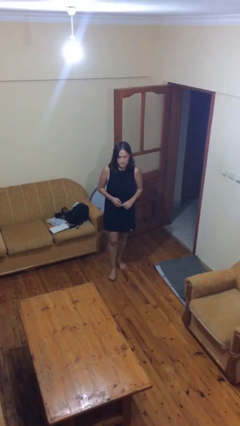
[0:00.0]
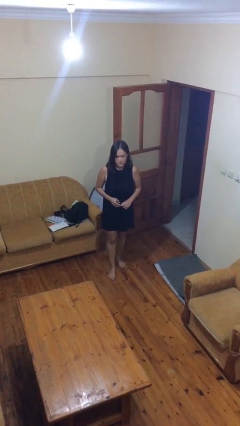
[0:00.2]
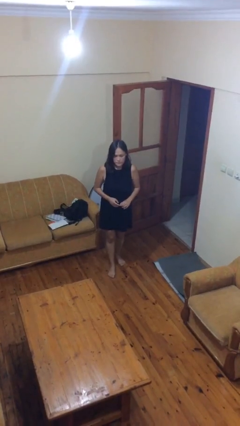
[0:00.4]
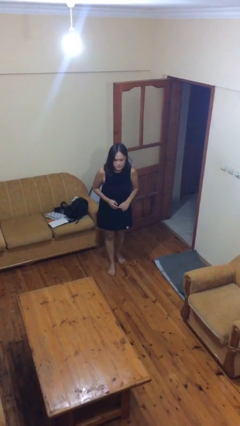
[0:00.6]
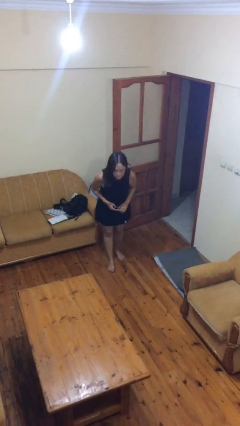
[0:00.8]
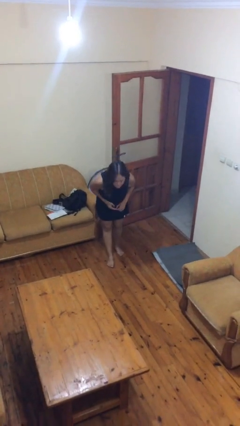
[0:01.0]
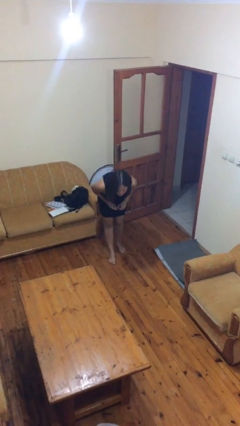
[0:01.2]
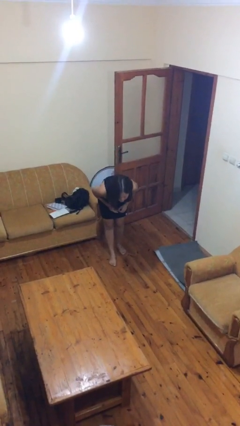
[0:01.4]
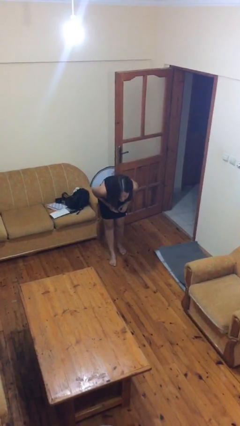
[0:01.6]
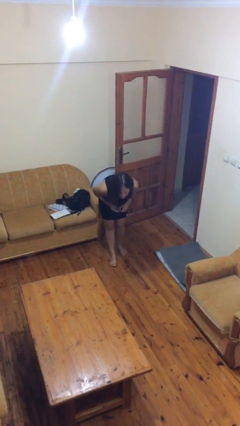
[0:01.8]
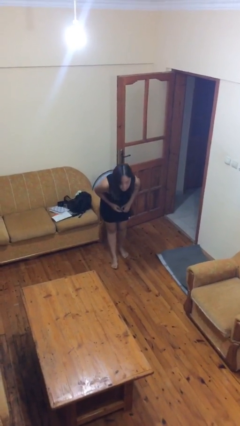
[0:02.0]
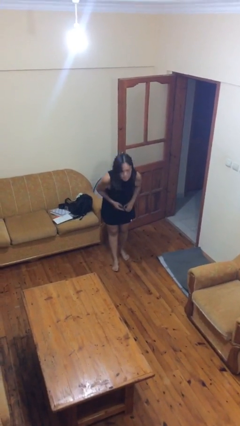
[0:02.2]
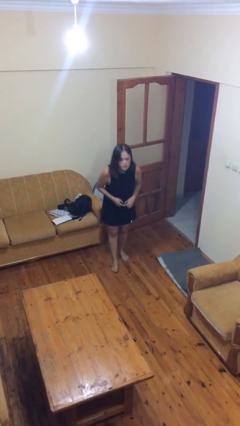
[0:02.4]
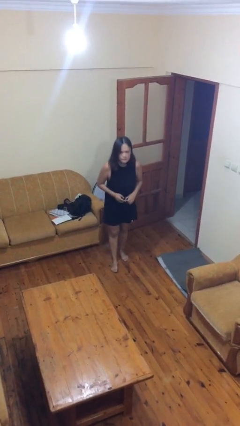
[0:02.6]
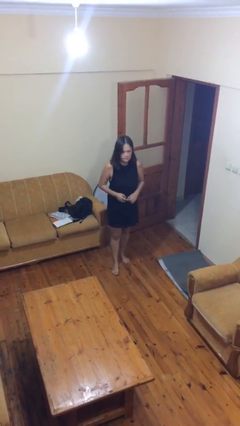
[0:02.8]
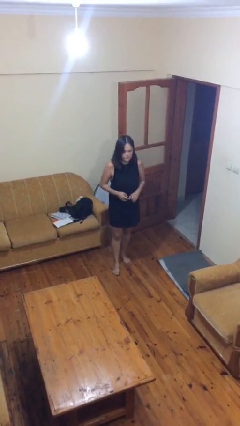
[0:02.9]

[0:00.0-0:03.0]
person bows

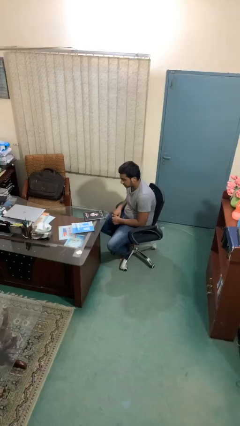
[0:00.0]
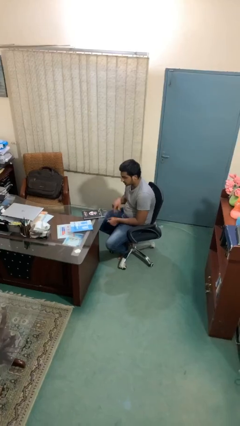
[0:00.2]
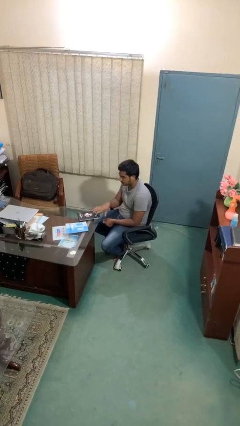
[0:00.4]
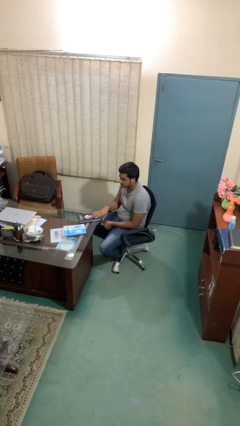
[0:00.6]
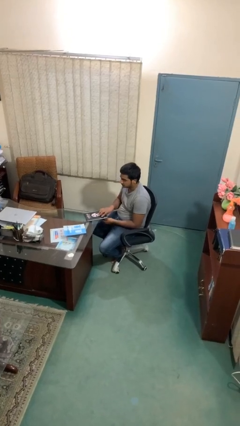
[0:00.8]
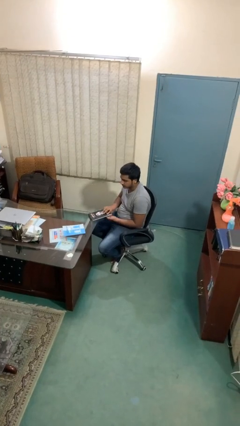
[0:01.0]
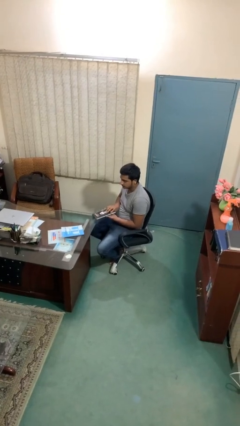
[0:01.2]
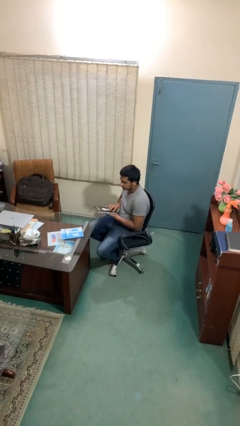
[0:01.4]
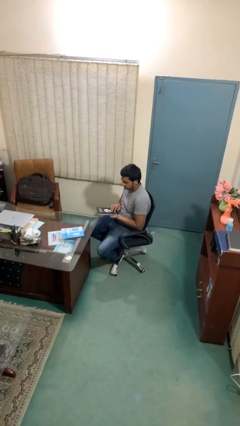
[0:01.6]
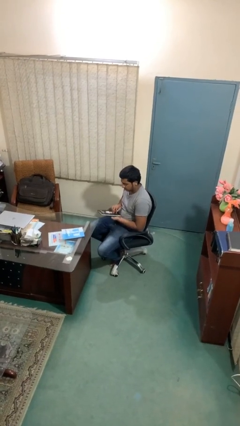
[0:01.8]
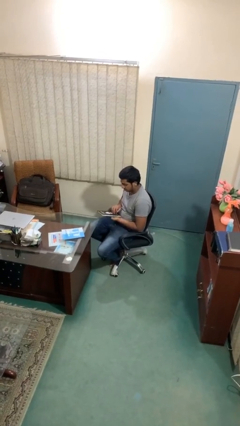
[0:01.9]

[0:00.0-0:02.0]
person picks up object from table

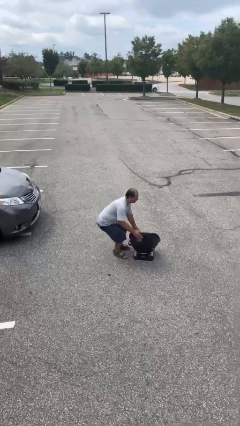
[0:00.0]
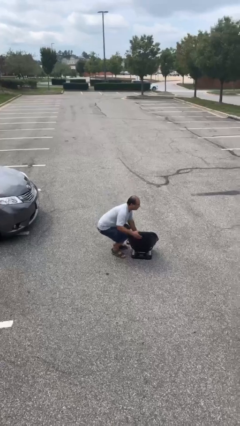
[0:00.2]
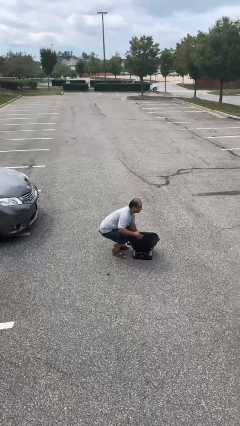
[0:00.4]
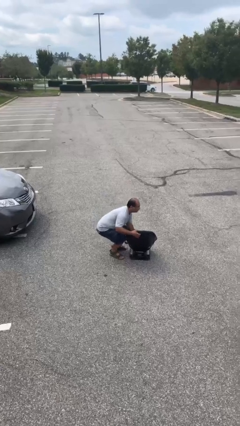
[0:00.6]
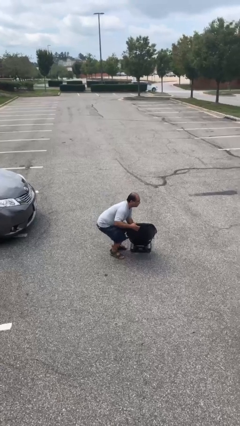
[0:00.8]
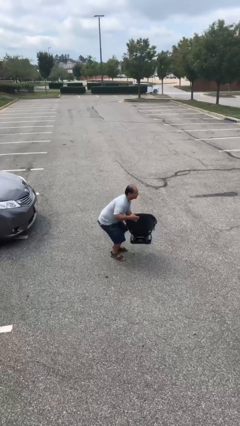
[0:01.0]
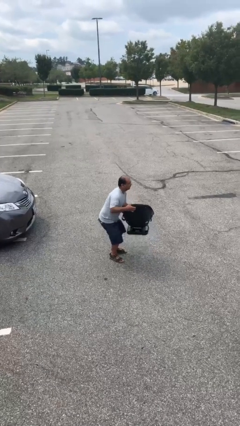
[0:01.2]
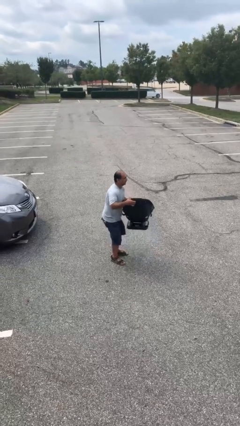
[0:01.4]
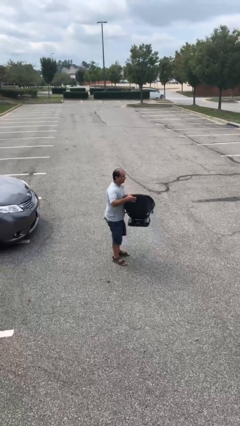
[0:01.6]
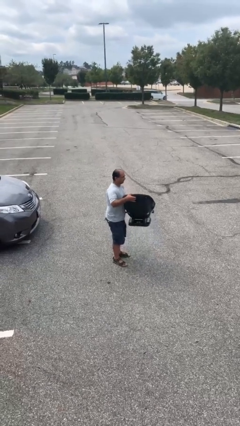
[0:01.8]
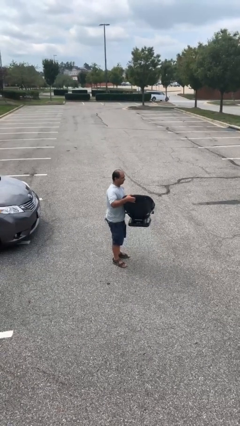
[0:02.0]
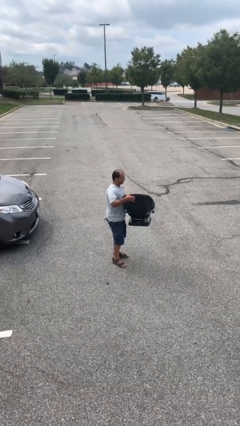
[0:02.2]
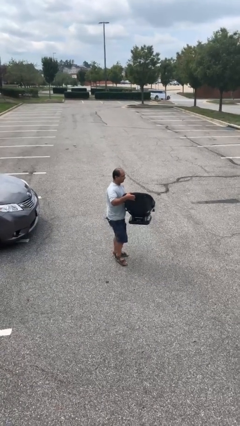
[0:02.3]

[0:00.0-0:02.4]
person picks up object from floor

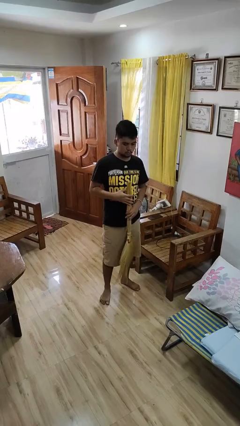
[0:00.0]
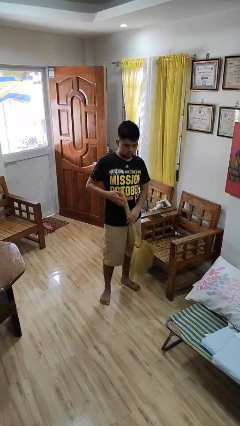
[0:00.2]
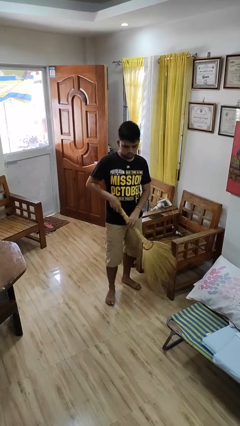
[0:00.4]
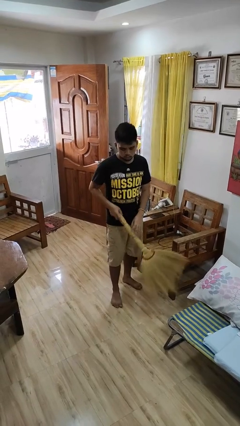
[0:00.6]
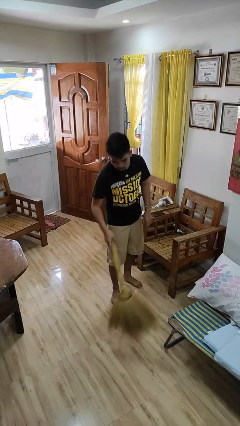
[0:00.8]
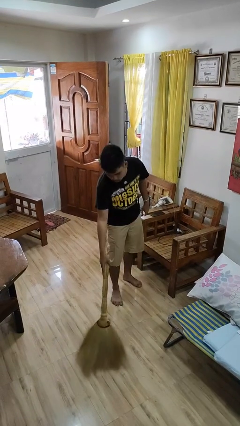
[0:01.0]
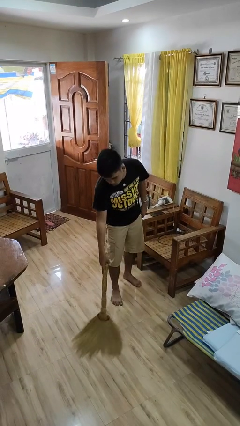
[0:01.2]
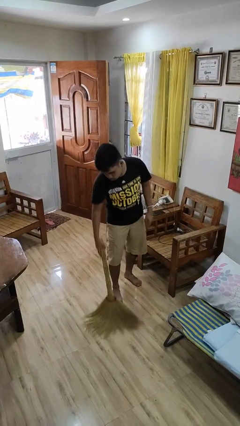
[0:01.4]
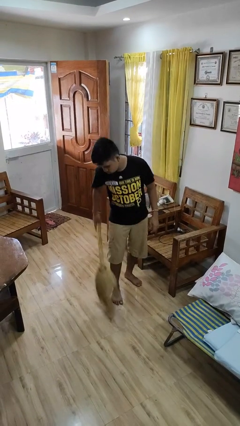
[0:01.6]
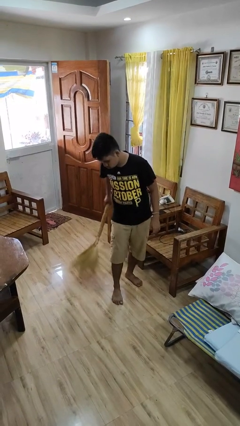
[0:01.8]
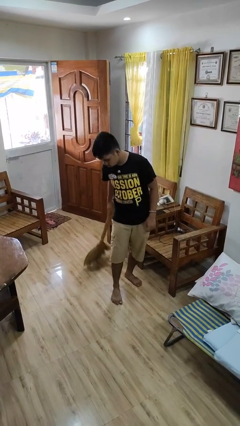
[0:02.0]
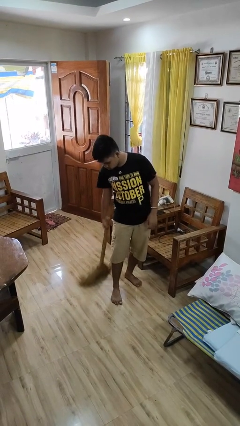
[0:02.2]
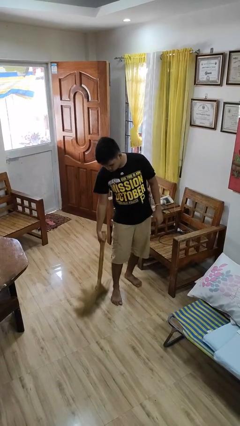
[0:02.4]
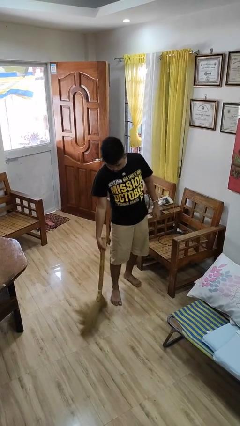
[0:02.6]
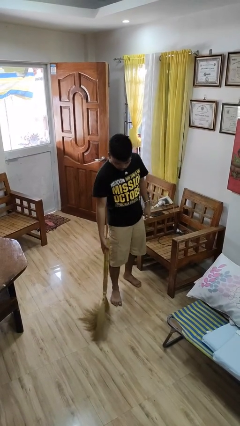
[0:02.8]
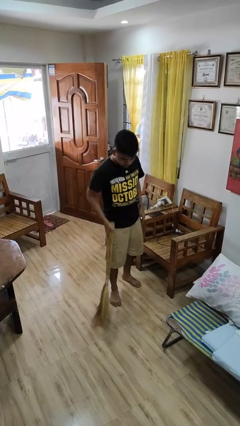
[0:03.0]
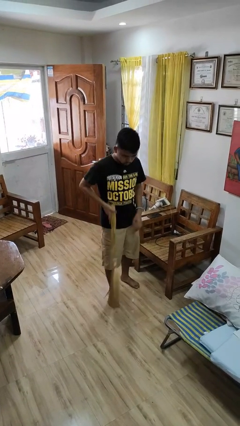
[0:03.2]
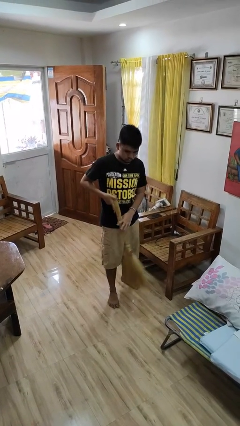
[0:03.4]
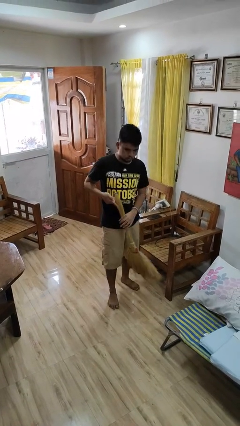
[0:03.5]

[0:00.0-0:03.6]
person sweeps floor

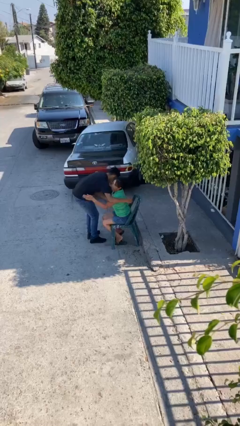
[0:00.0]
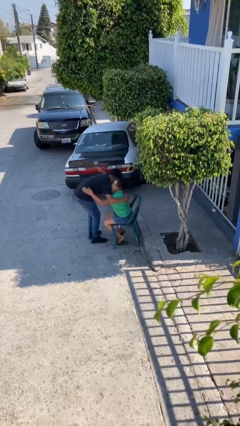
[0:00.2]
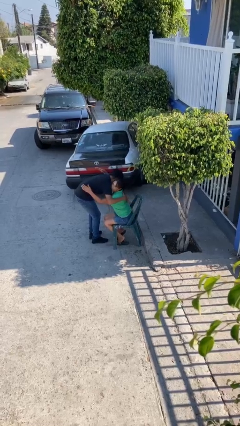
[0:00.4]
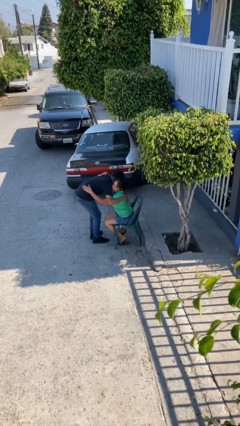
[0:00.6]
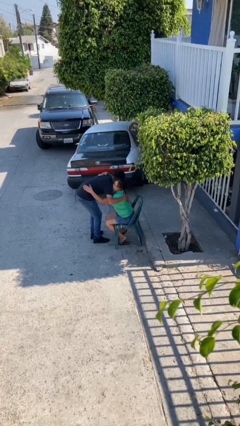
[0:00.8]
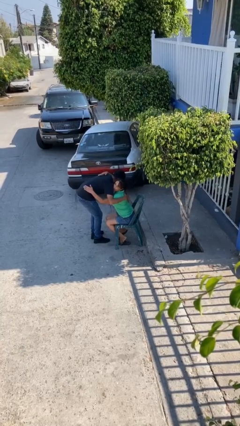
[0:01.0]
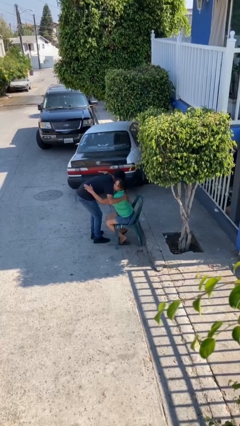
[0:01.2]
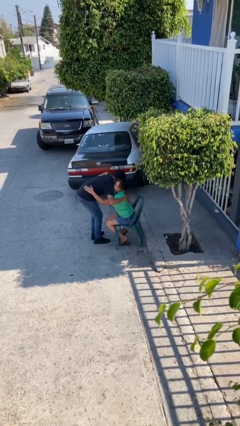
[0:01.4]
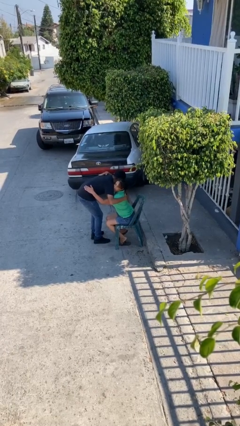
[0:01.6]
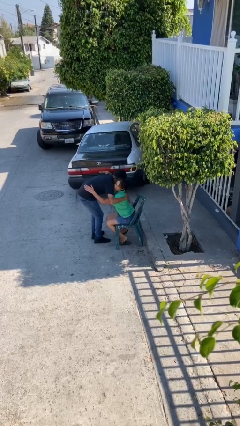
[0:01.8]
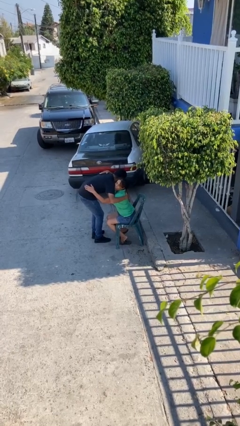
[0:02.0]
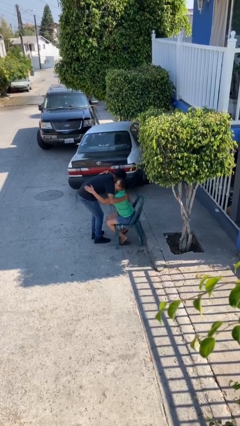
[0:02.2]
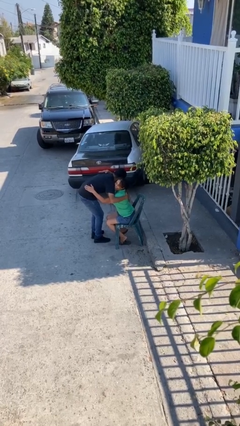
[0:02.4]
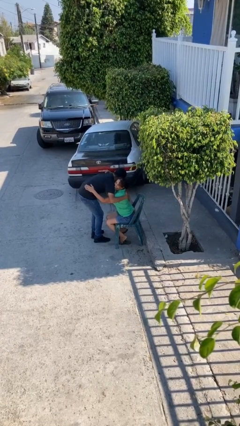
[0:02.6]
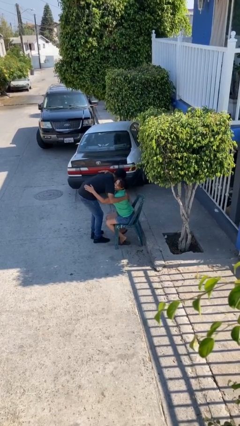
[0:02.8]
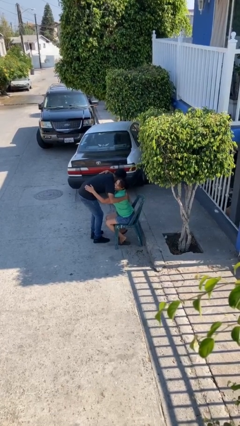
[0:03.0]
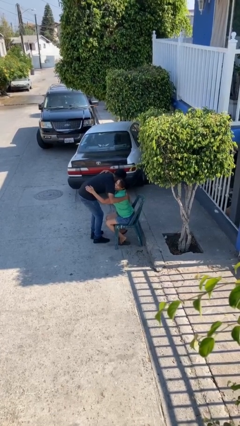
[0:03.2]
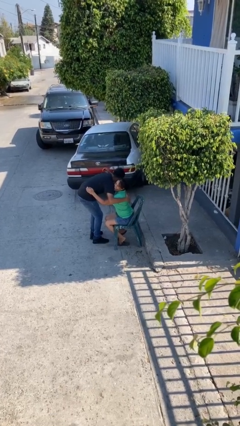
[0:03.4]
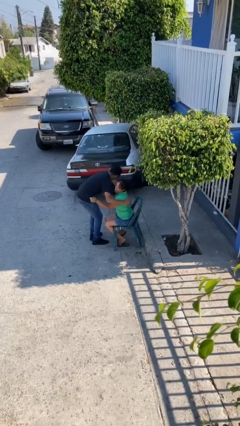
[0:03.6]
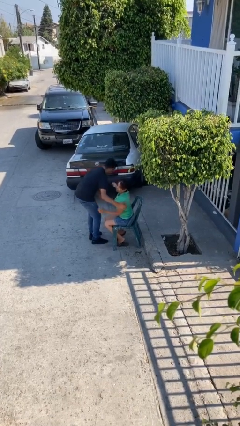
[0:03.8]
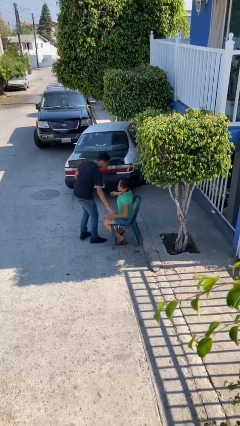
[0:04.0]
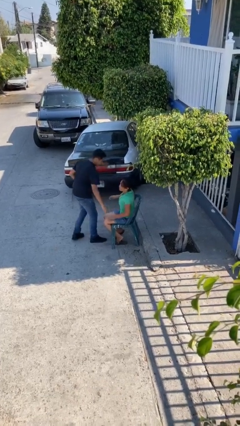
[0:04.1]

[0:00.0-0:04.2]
person embraces person

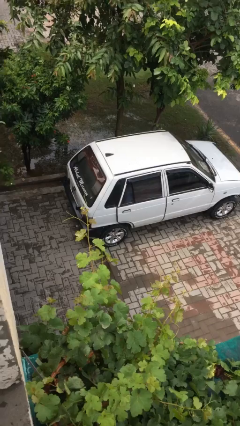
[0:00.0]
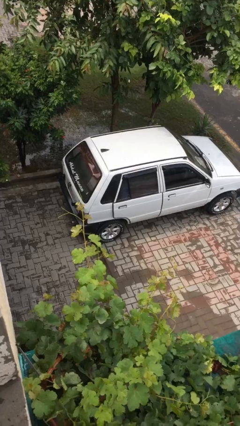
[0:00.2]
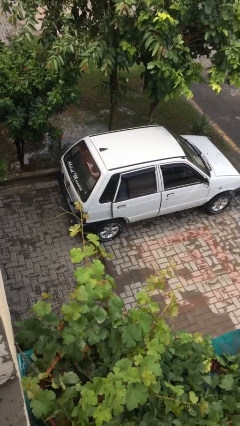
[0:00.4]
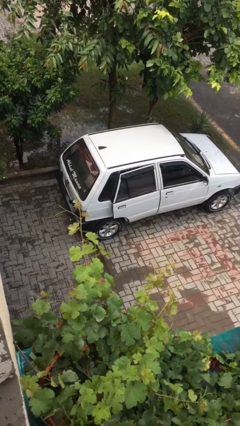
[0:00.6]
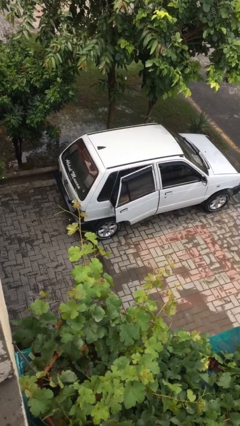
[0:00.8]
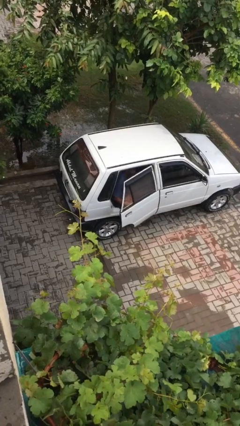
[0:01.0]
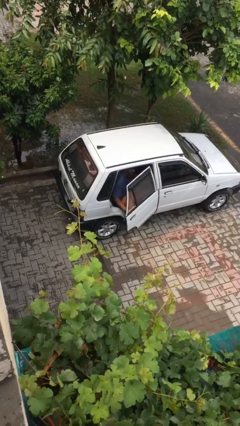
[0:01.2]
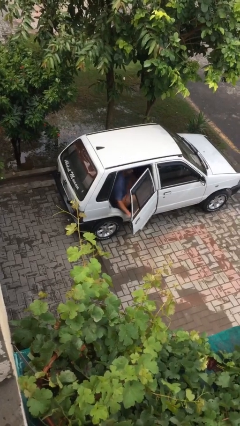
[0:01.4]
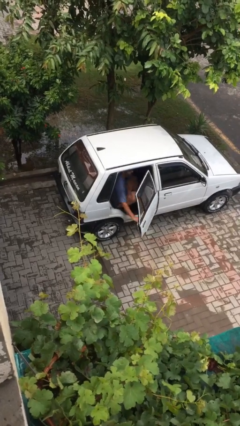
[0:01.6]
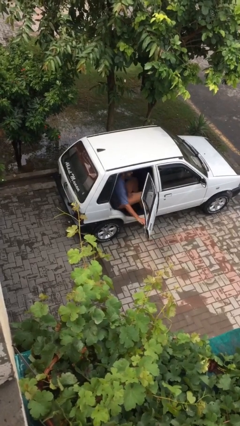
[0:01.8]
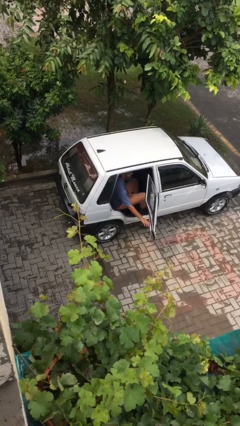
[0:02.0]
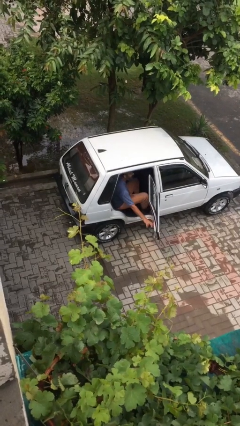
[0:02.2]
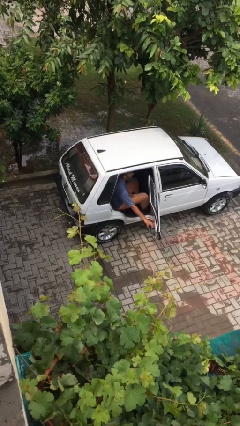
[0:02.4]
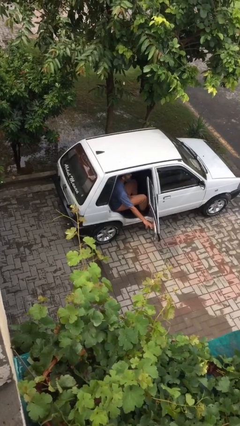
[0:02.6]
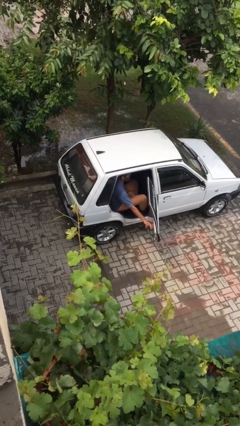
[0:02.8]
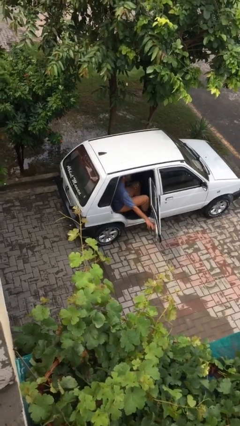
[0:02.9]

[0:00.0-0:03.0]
person opens car door
